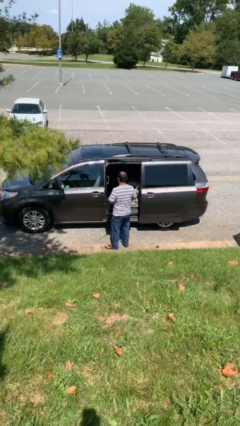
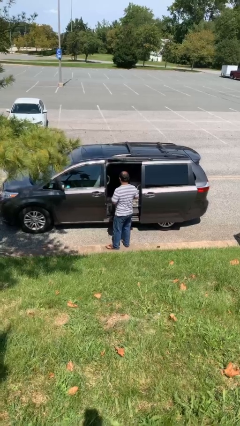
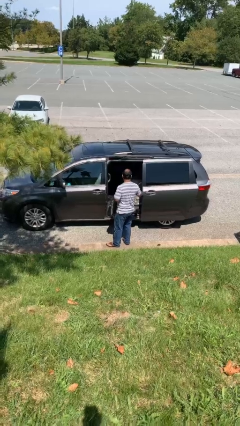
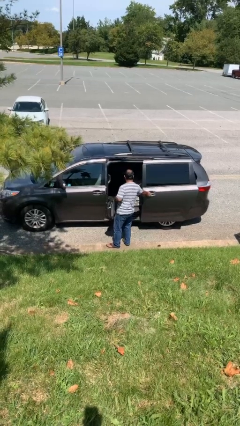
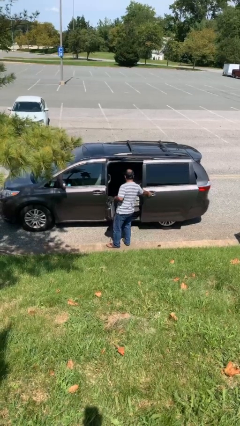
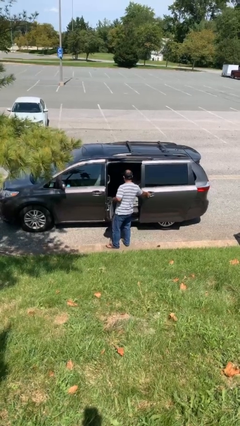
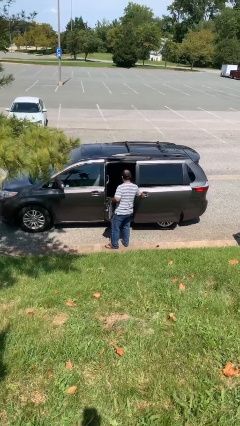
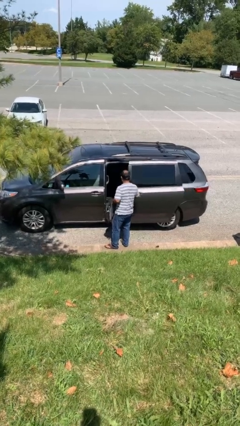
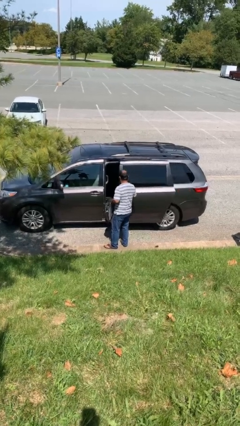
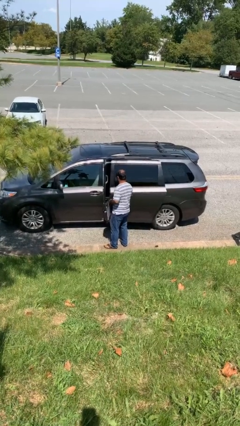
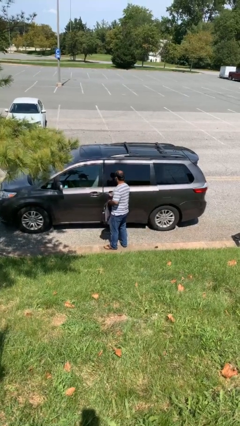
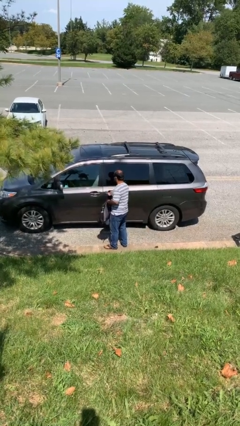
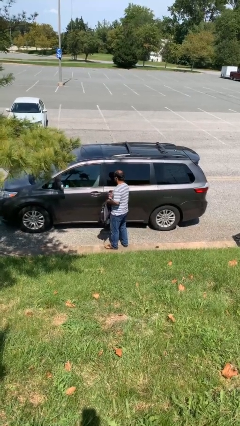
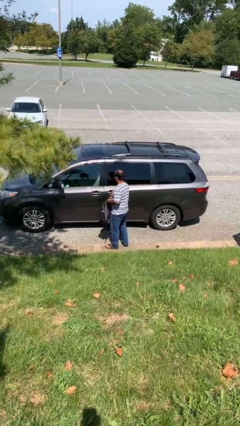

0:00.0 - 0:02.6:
person closes car door

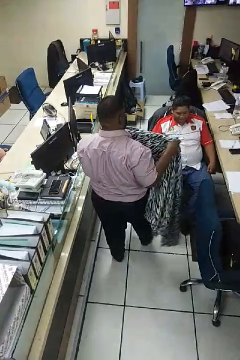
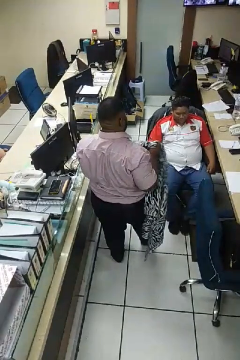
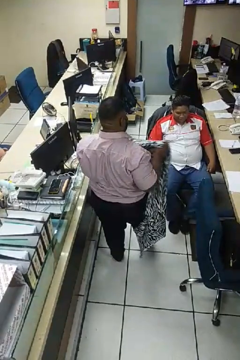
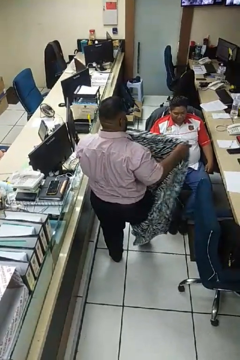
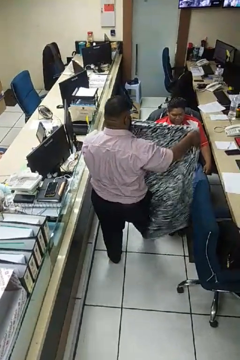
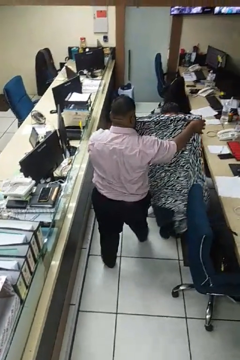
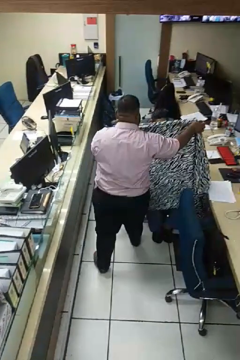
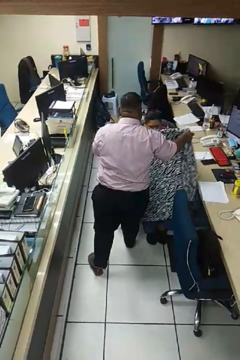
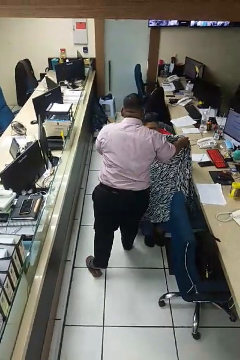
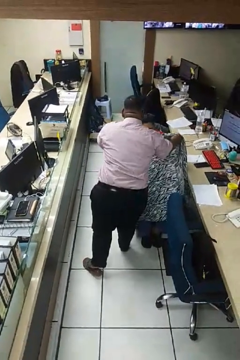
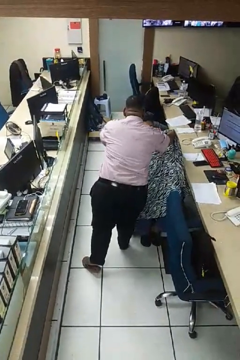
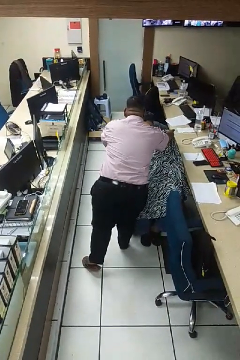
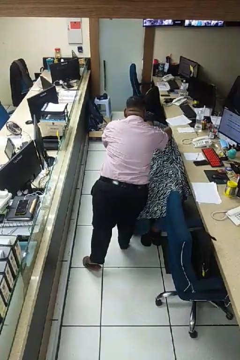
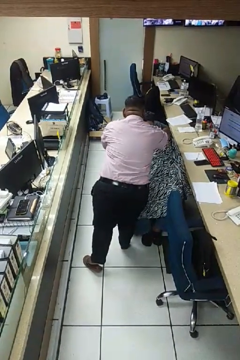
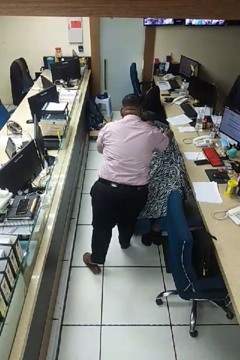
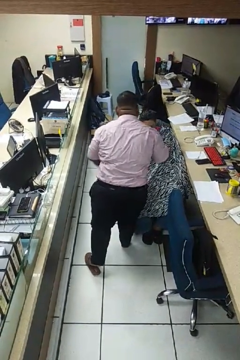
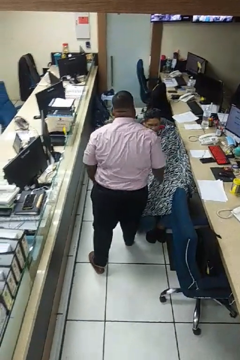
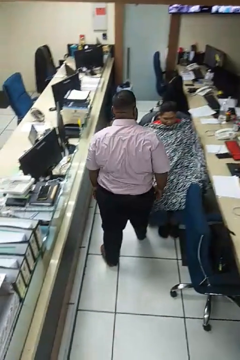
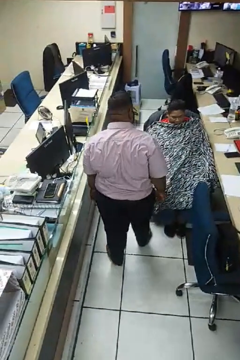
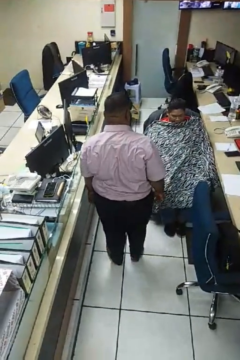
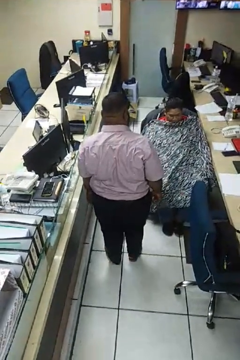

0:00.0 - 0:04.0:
person covers friend with blanket

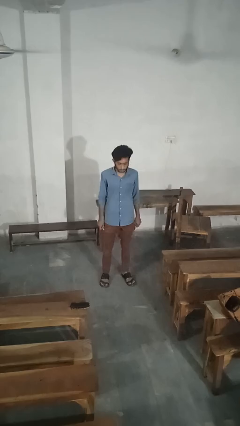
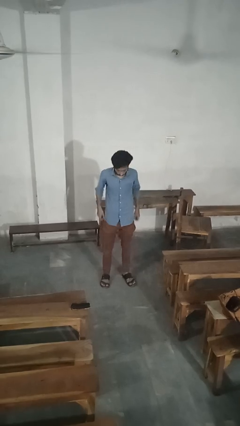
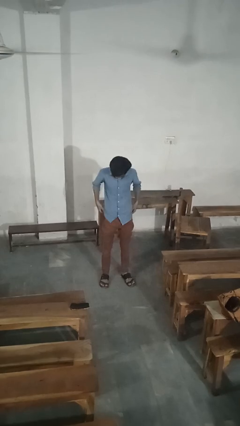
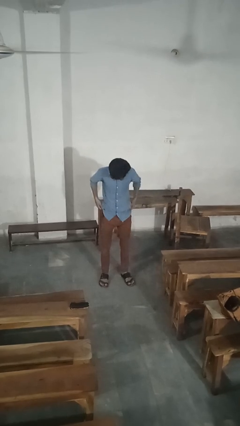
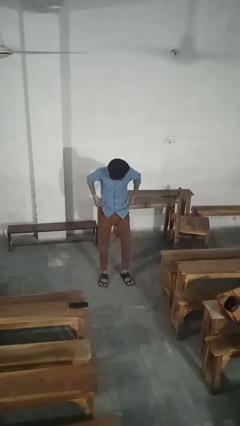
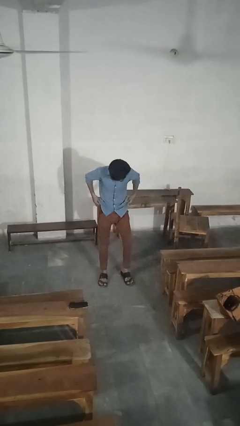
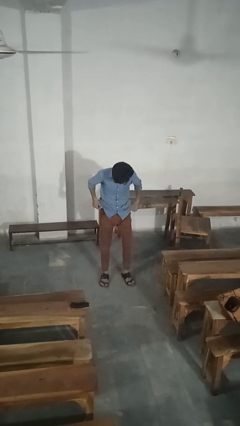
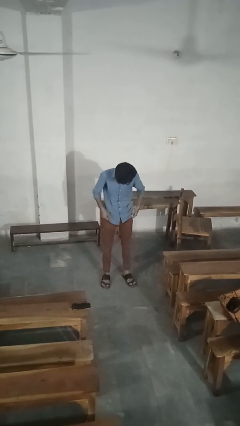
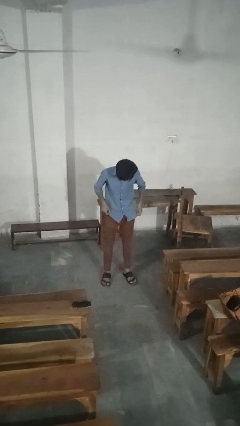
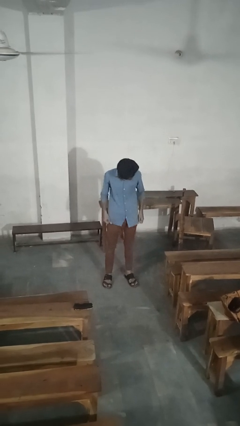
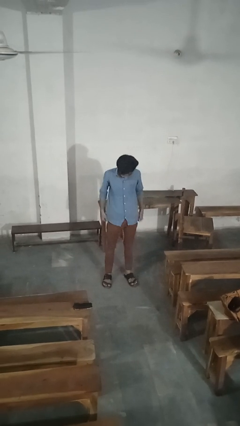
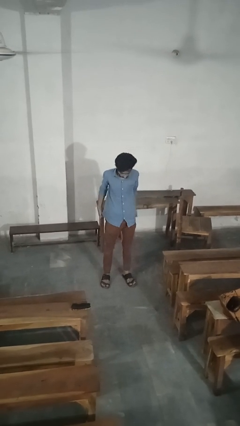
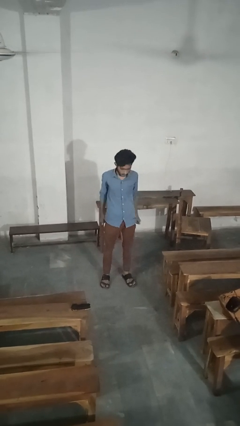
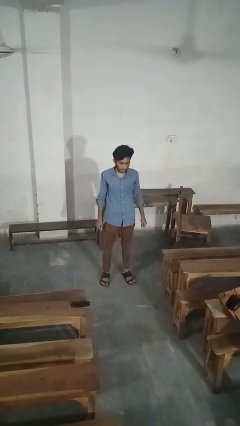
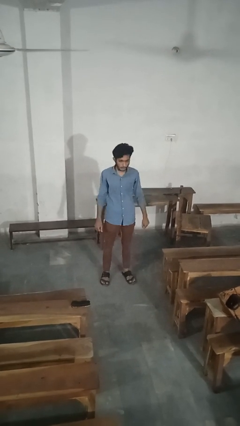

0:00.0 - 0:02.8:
person hikes up pants

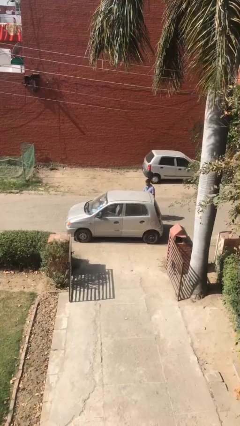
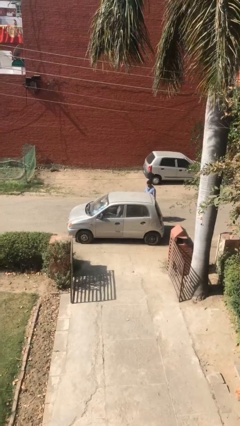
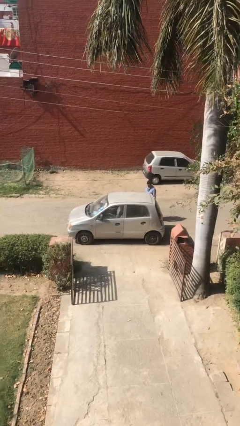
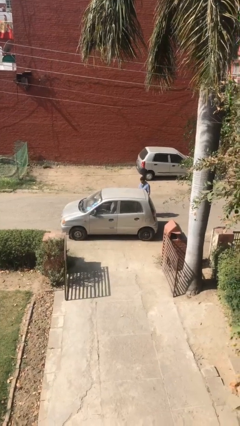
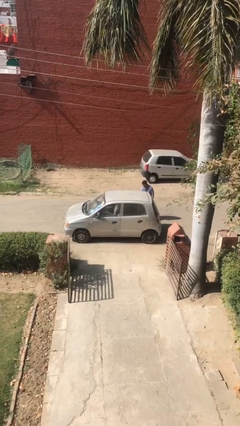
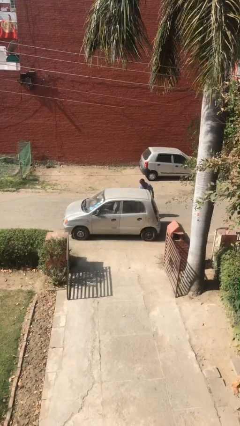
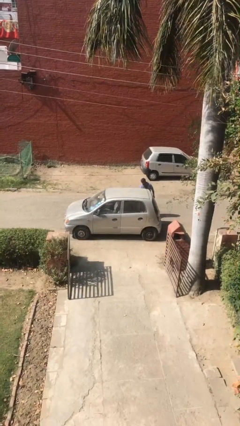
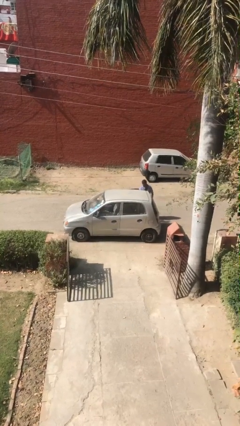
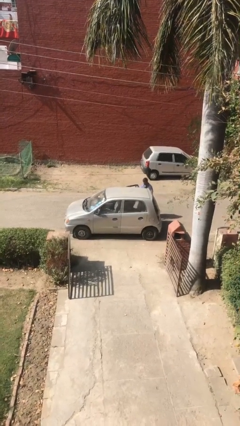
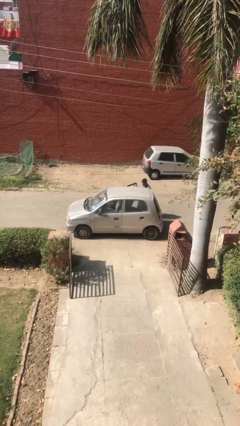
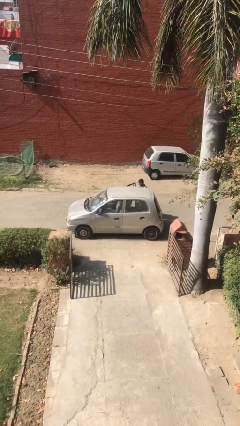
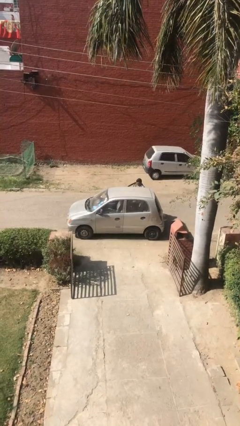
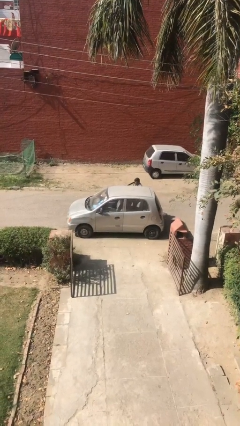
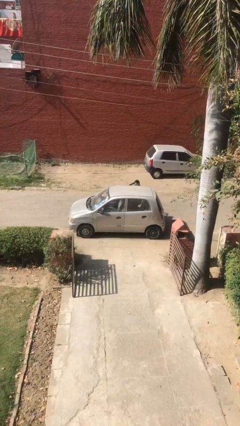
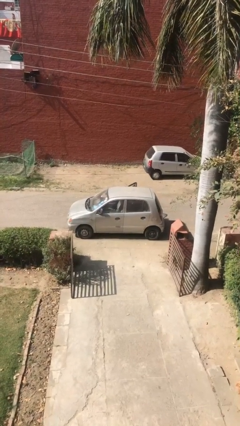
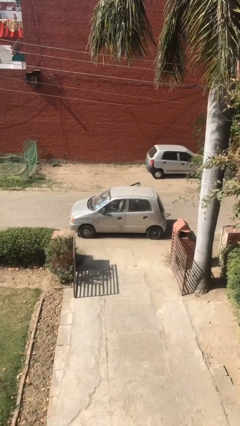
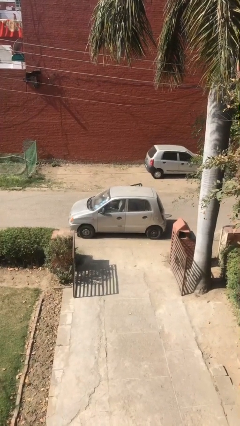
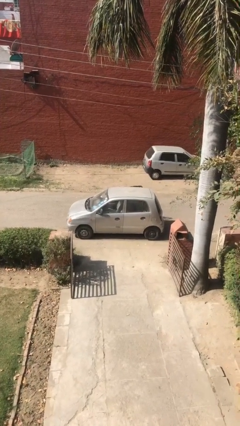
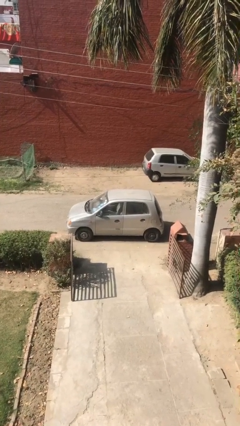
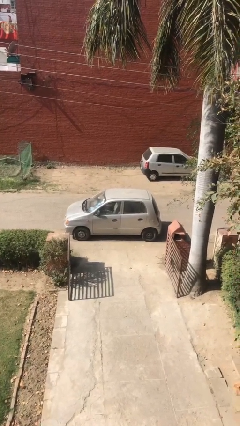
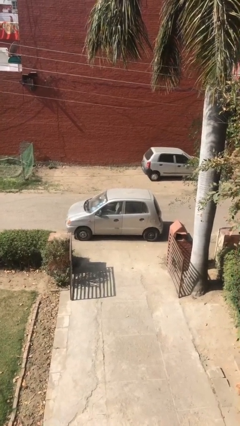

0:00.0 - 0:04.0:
car picks up person

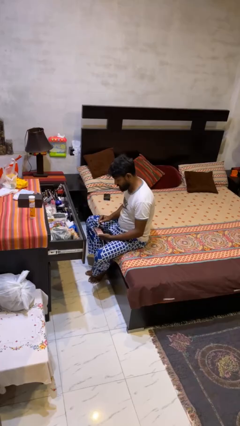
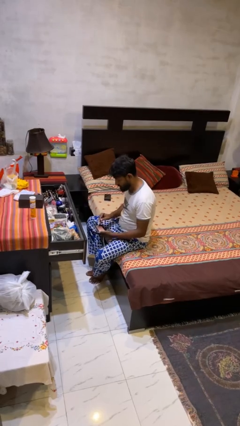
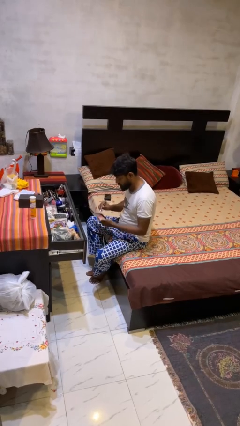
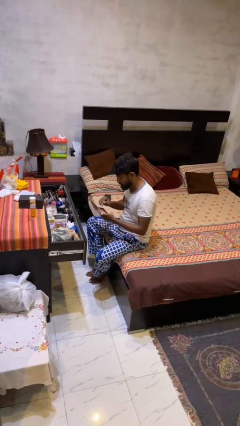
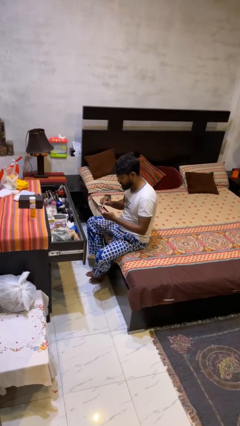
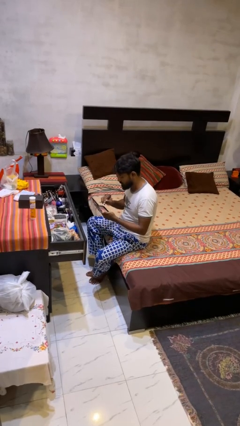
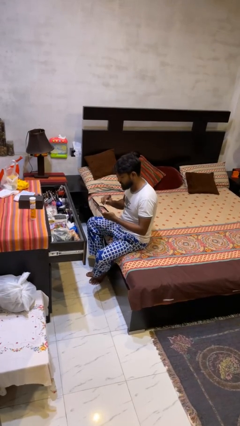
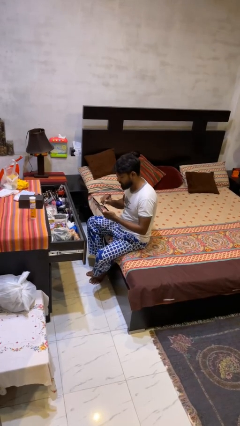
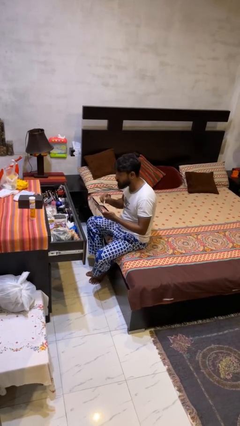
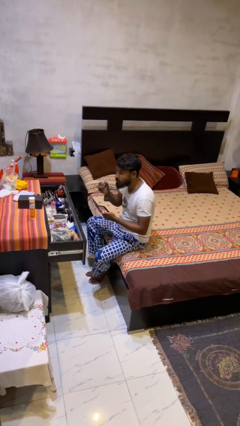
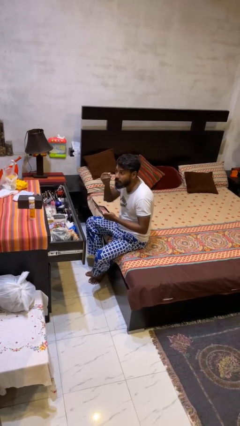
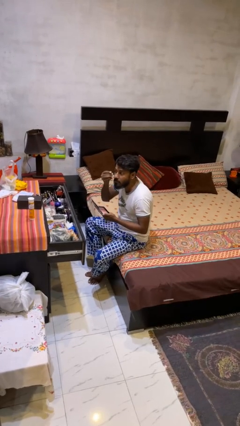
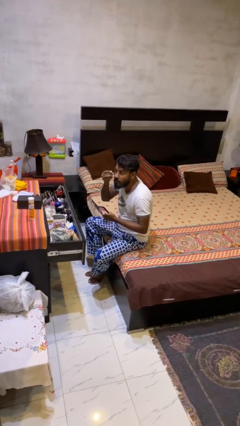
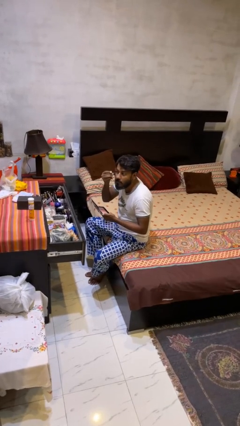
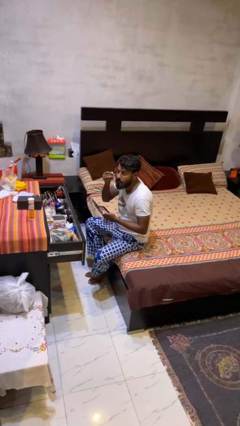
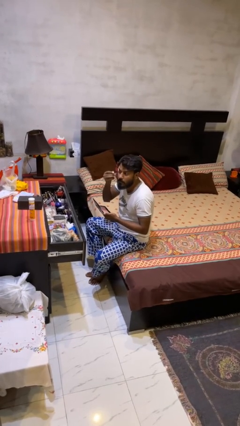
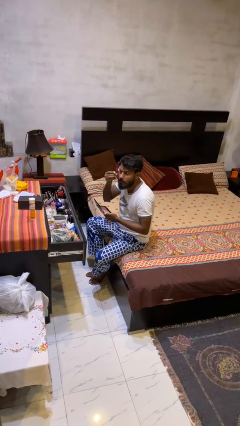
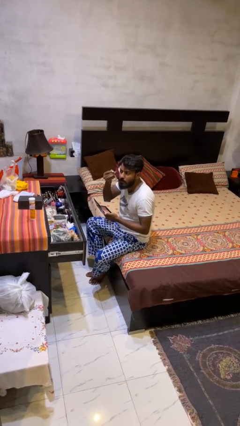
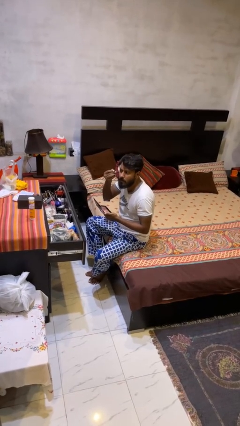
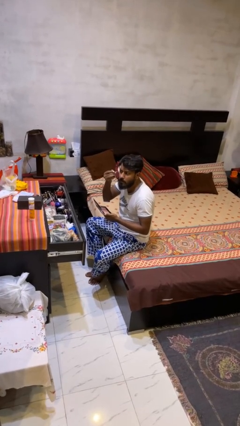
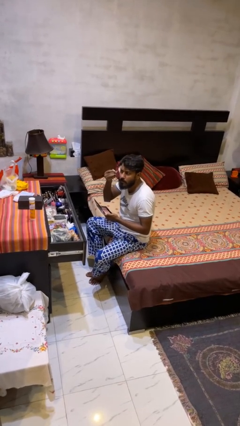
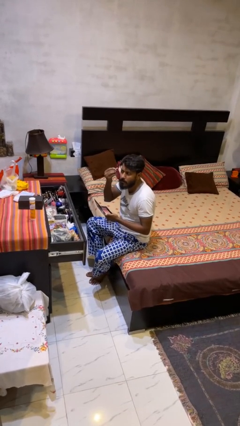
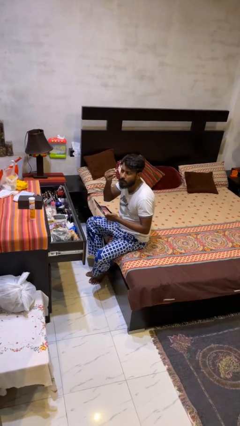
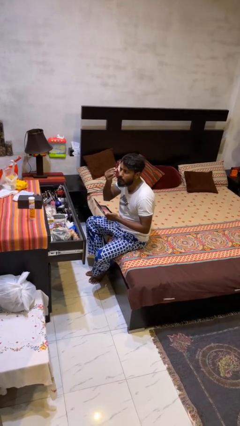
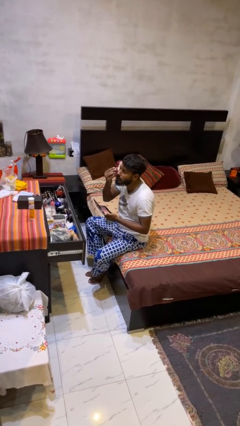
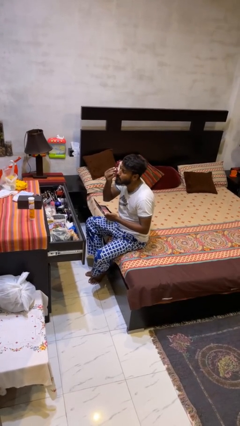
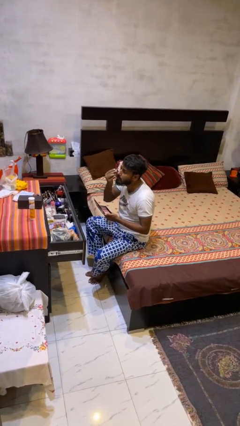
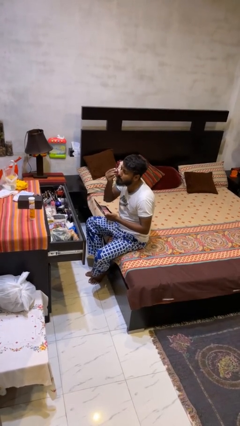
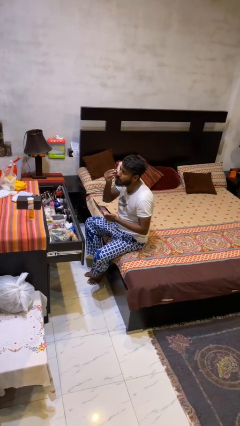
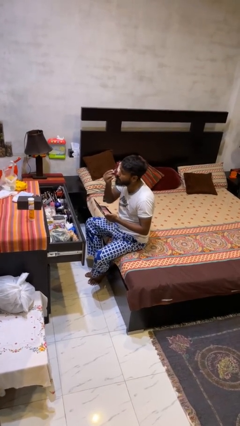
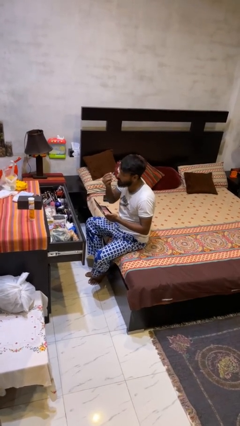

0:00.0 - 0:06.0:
person applies eye makeup
